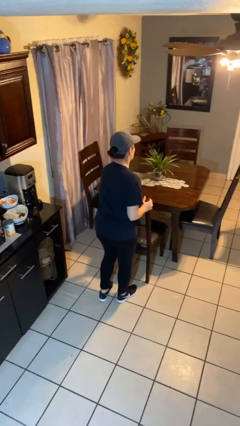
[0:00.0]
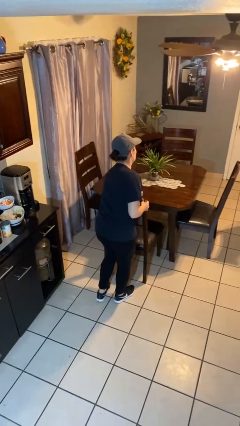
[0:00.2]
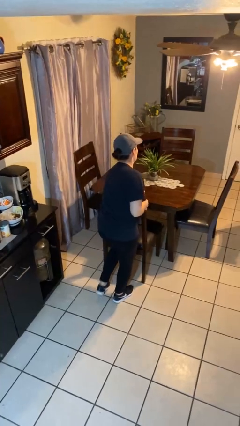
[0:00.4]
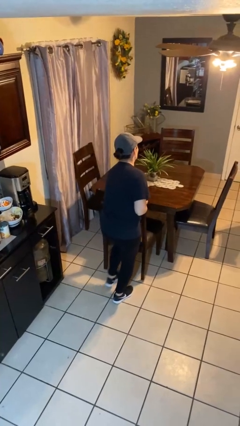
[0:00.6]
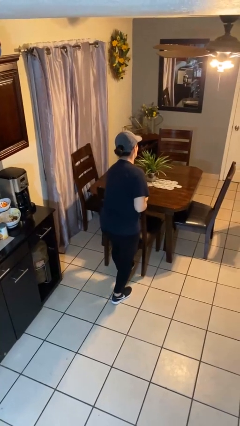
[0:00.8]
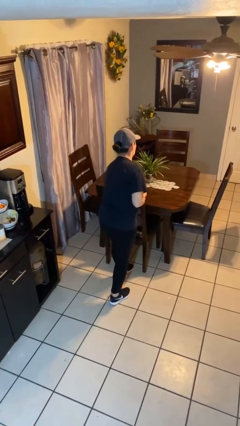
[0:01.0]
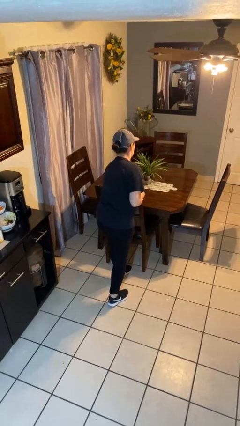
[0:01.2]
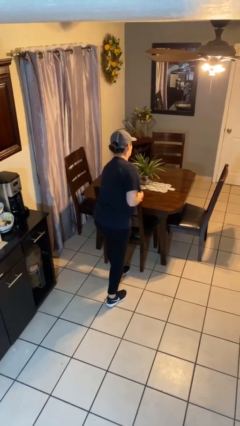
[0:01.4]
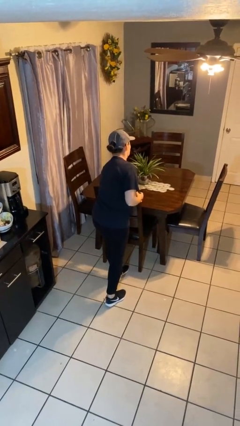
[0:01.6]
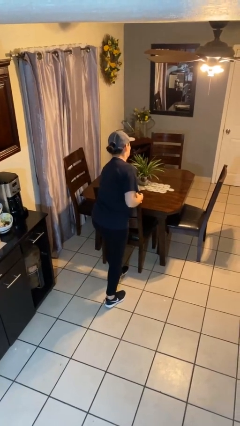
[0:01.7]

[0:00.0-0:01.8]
person pushes in chair

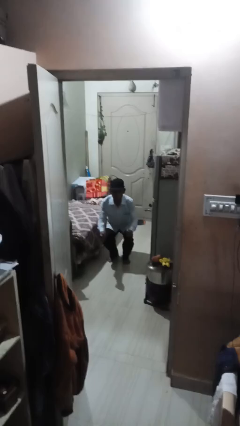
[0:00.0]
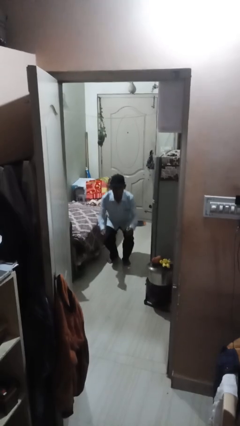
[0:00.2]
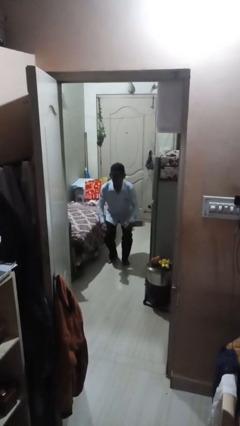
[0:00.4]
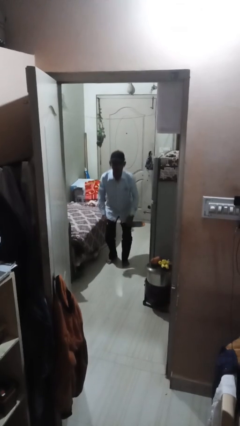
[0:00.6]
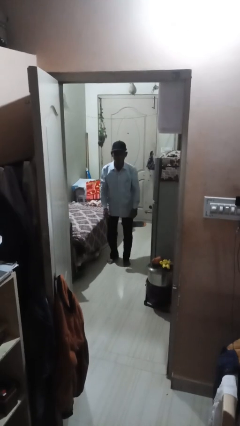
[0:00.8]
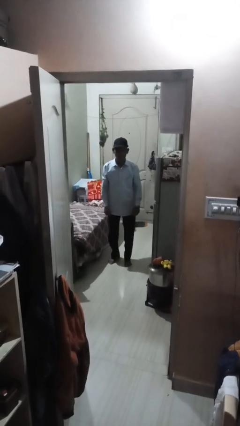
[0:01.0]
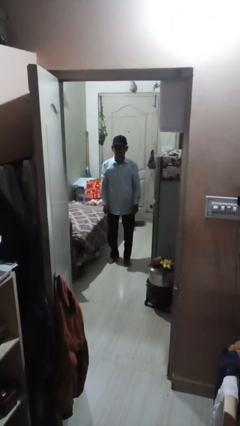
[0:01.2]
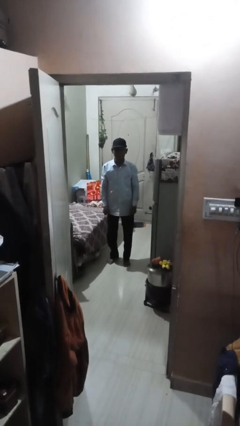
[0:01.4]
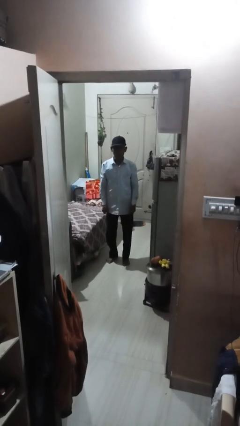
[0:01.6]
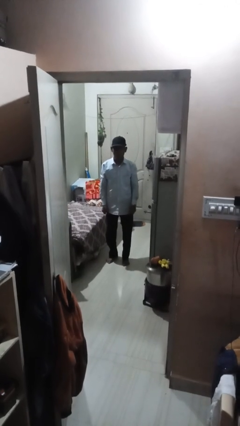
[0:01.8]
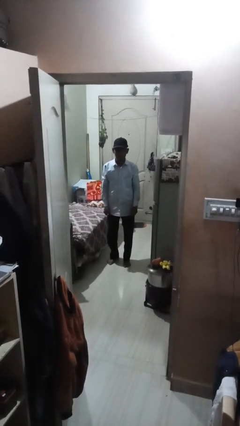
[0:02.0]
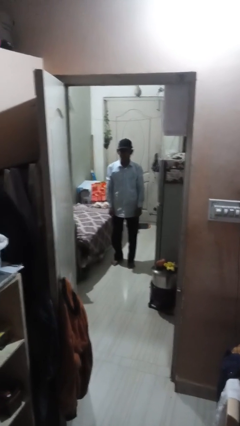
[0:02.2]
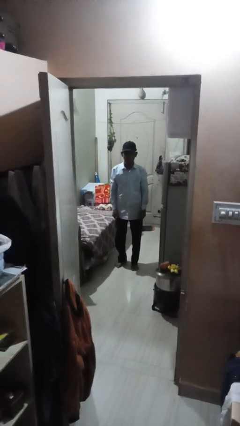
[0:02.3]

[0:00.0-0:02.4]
person stands up

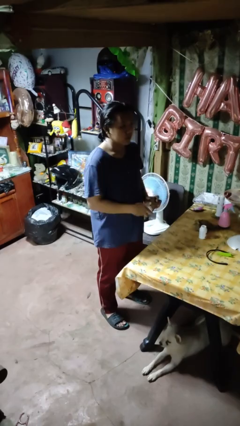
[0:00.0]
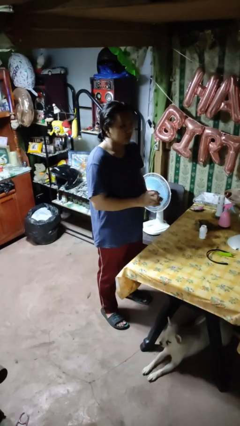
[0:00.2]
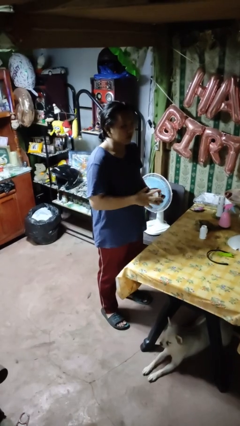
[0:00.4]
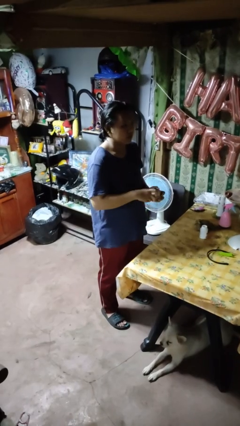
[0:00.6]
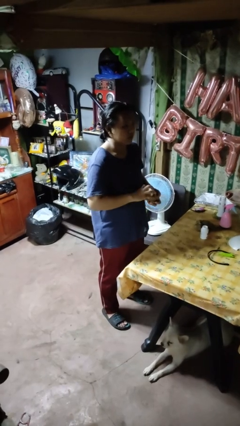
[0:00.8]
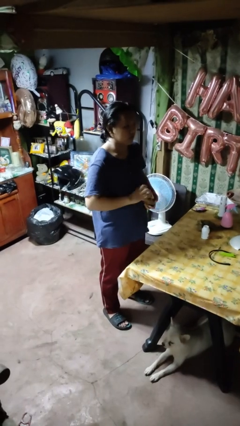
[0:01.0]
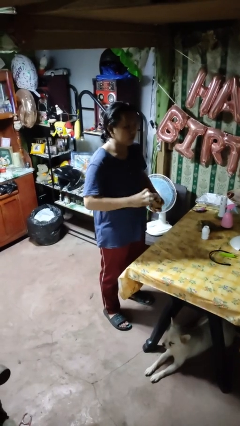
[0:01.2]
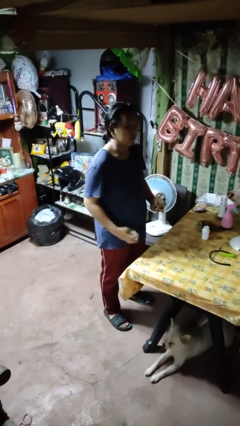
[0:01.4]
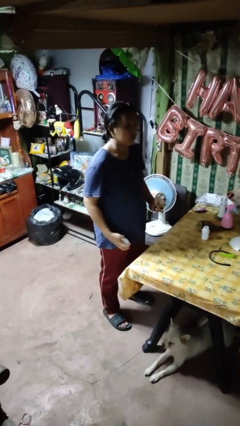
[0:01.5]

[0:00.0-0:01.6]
person opens jar

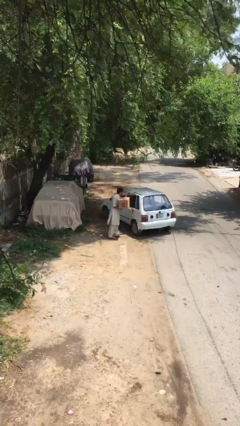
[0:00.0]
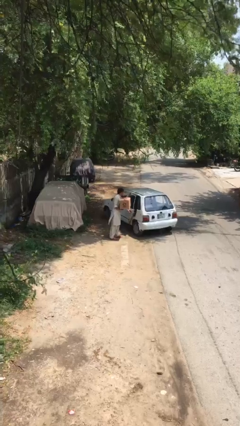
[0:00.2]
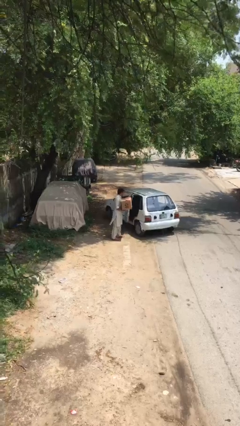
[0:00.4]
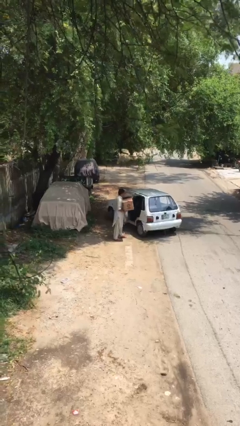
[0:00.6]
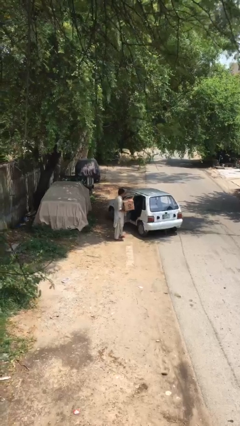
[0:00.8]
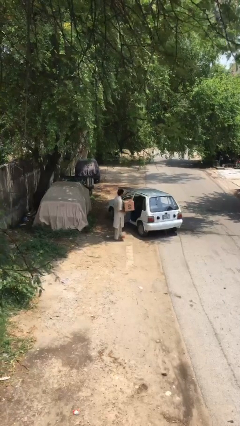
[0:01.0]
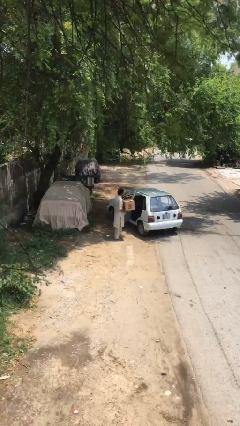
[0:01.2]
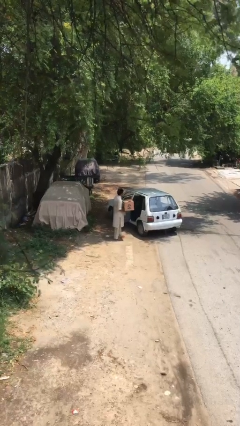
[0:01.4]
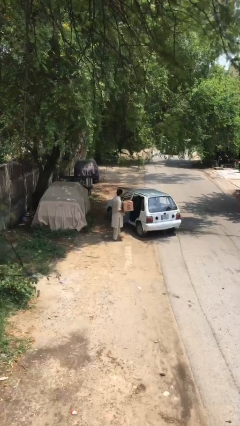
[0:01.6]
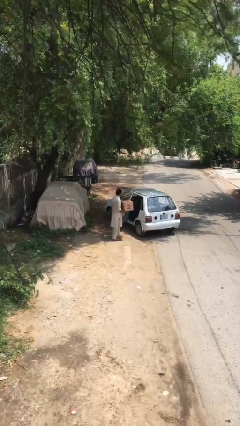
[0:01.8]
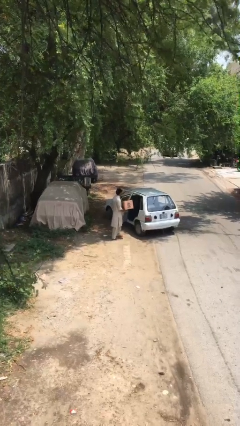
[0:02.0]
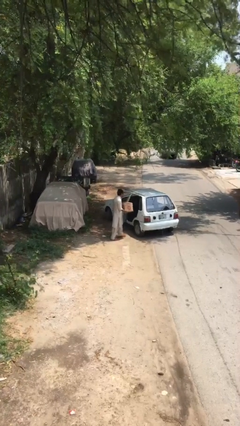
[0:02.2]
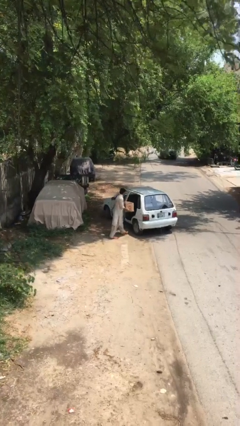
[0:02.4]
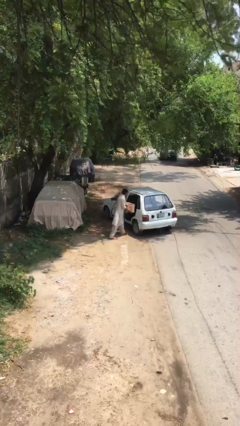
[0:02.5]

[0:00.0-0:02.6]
person opens car door

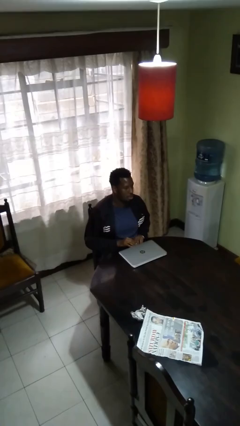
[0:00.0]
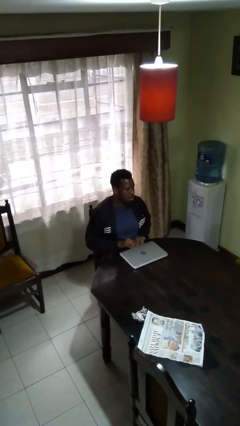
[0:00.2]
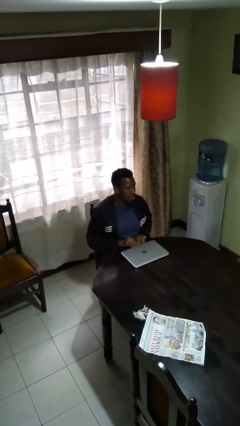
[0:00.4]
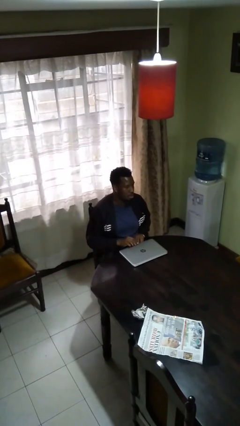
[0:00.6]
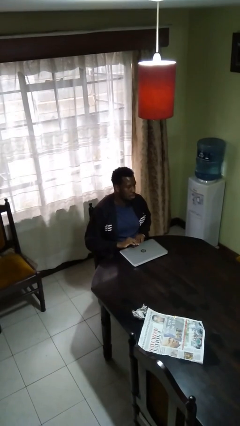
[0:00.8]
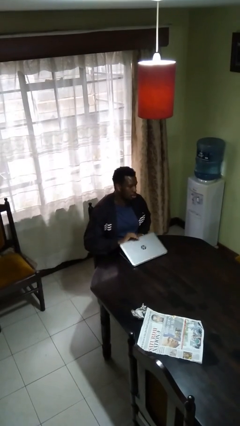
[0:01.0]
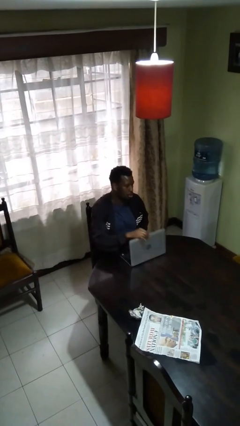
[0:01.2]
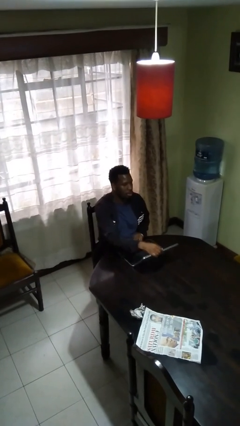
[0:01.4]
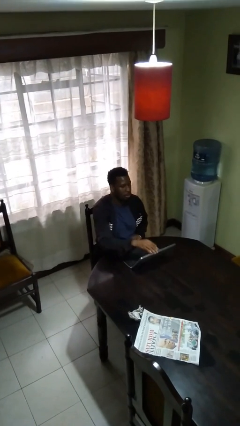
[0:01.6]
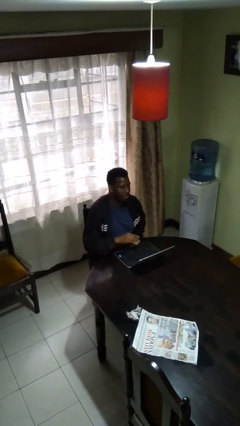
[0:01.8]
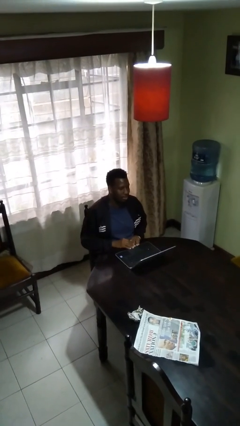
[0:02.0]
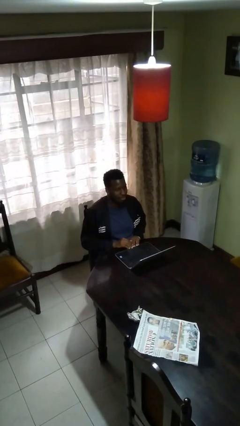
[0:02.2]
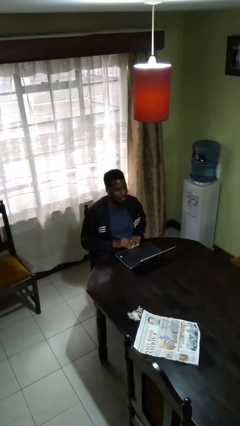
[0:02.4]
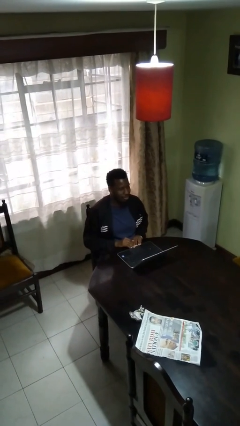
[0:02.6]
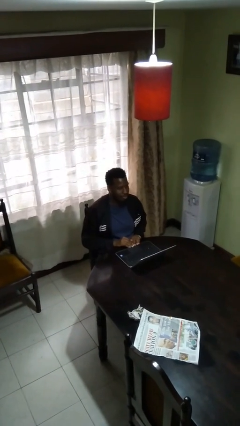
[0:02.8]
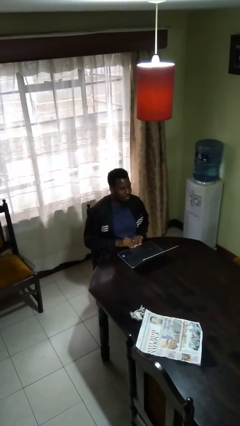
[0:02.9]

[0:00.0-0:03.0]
person opens laptop

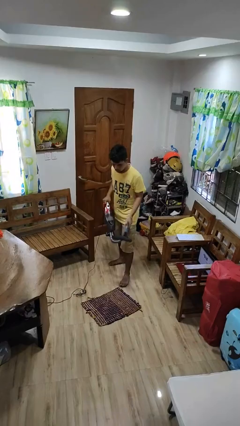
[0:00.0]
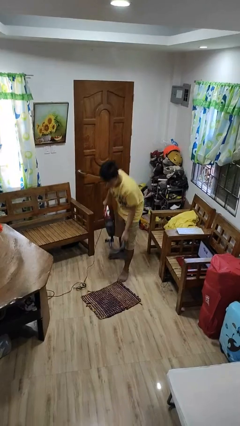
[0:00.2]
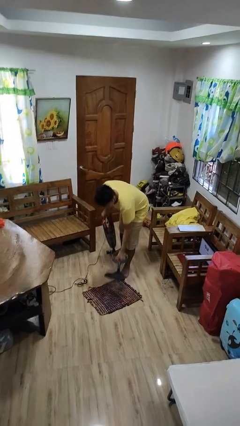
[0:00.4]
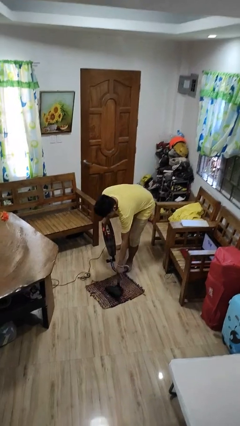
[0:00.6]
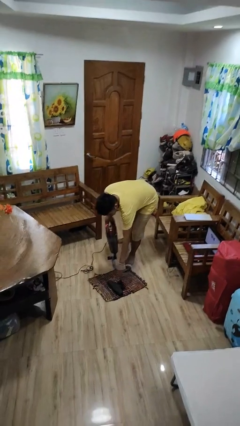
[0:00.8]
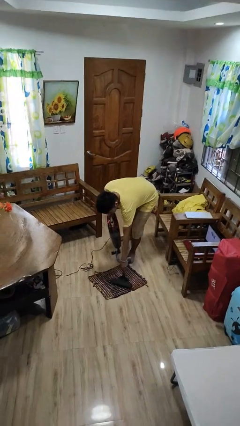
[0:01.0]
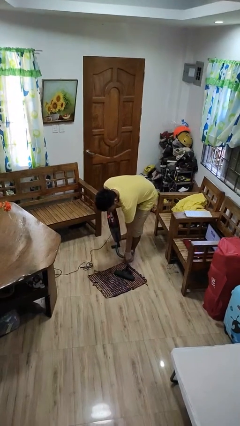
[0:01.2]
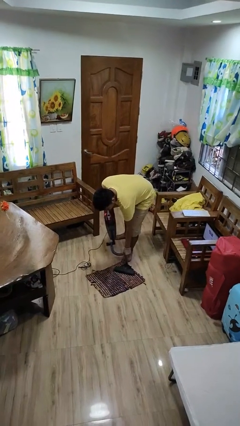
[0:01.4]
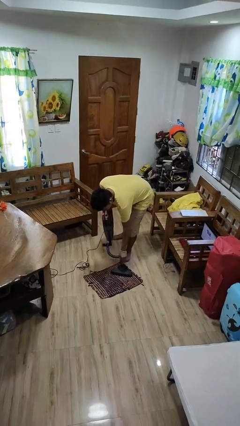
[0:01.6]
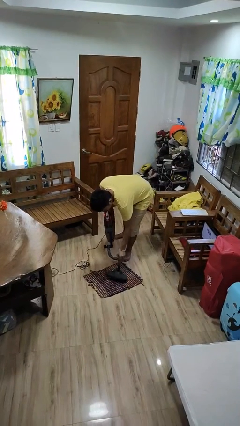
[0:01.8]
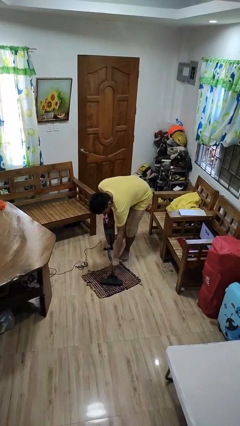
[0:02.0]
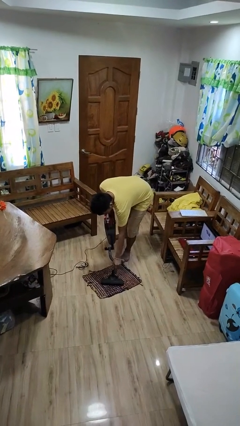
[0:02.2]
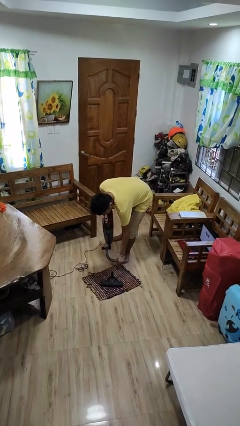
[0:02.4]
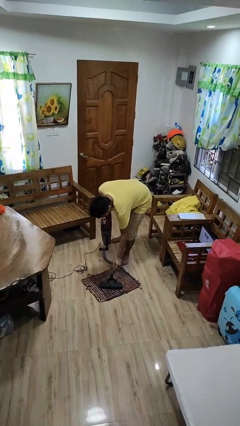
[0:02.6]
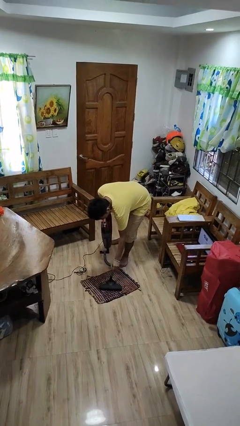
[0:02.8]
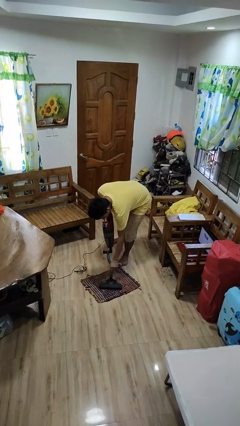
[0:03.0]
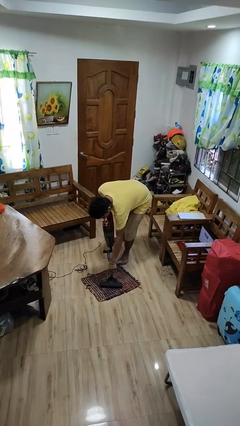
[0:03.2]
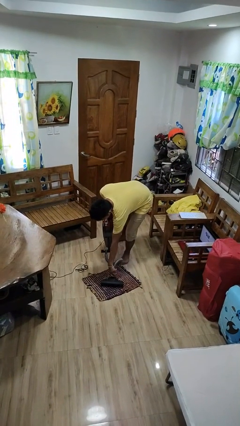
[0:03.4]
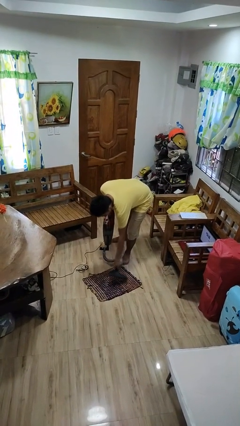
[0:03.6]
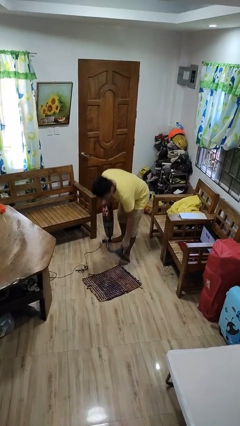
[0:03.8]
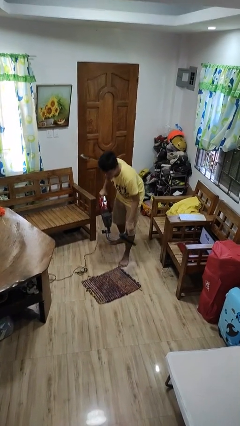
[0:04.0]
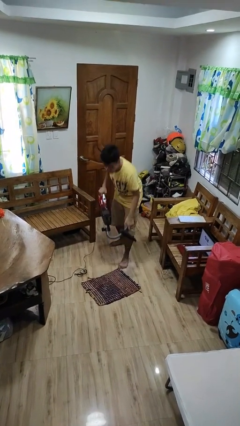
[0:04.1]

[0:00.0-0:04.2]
person vacuums carpet

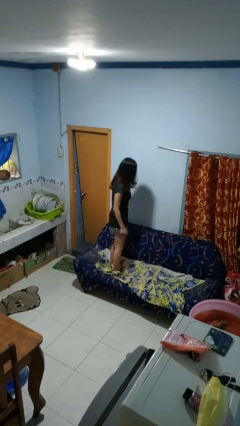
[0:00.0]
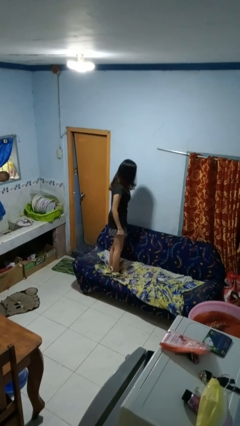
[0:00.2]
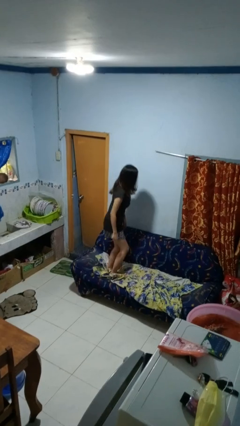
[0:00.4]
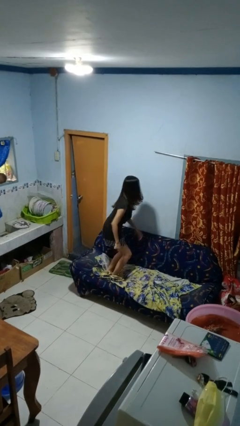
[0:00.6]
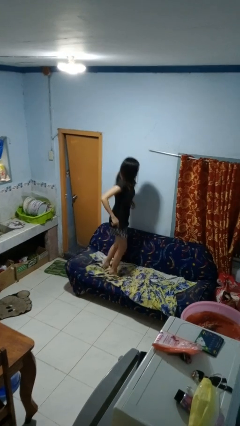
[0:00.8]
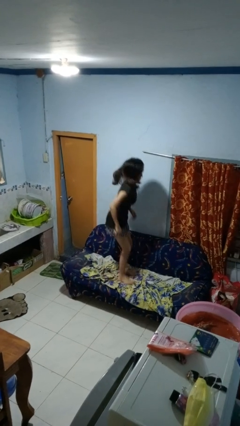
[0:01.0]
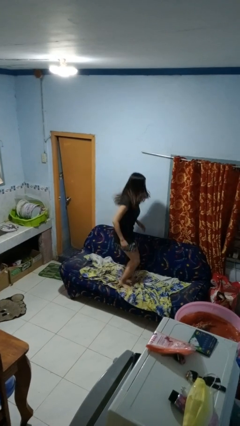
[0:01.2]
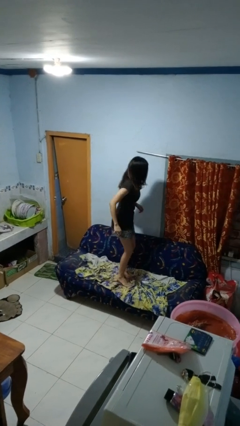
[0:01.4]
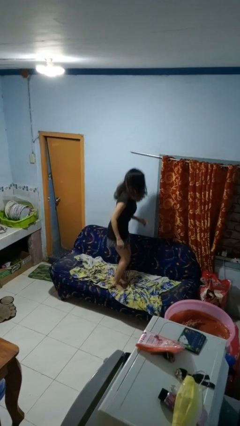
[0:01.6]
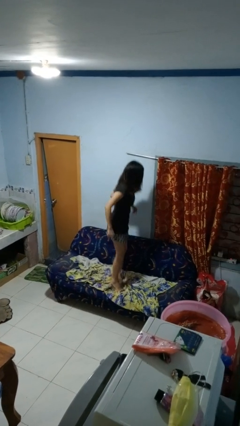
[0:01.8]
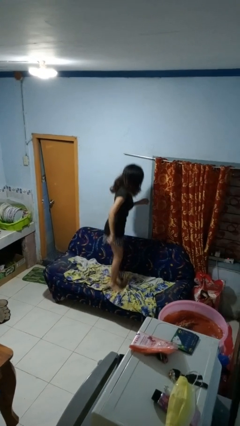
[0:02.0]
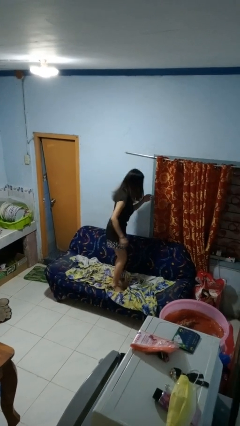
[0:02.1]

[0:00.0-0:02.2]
person jumps on couch
